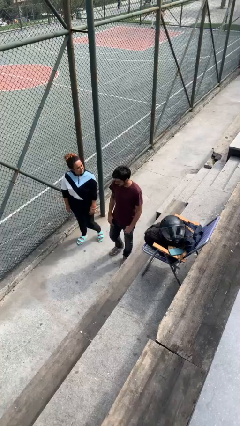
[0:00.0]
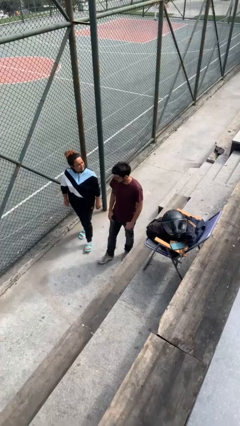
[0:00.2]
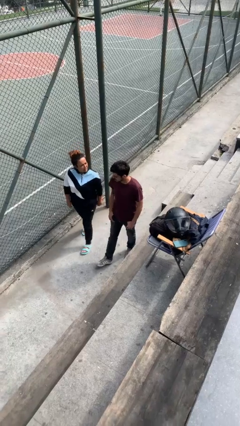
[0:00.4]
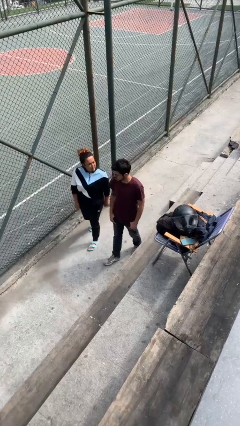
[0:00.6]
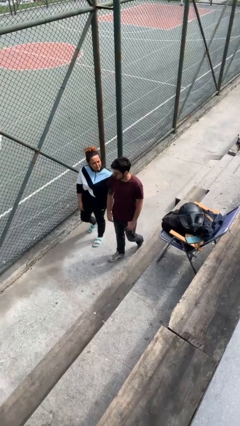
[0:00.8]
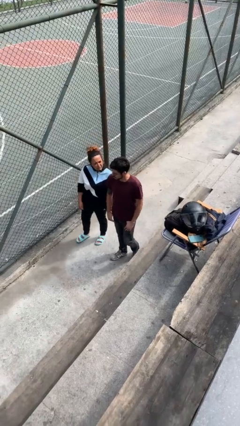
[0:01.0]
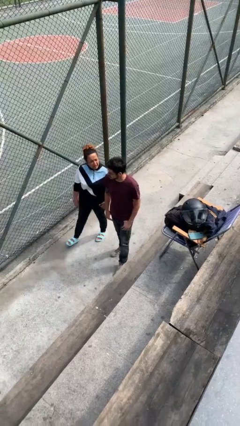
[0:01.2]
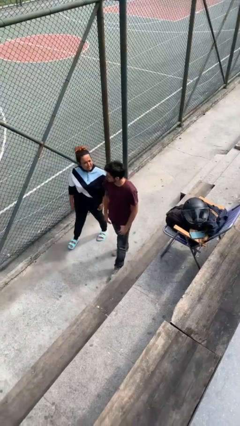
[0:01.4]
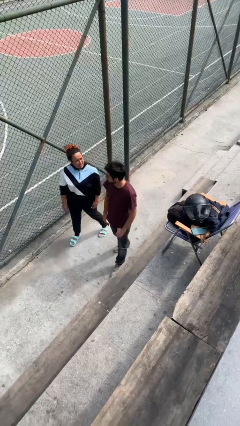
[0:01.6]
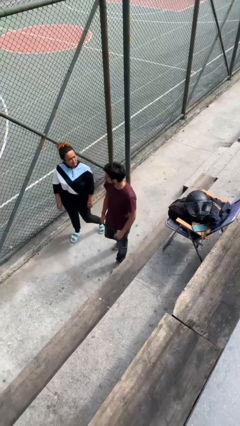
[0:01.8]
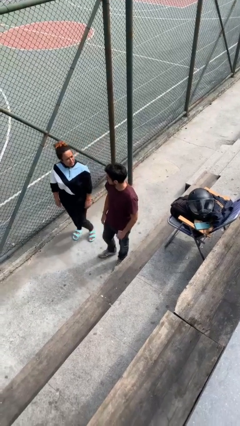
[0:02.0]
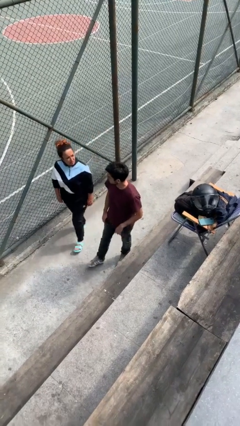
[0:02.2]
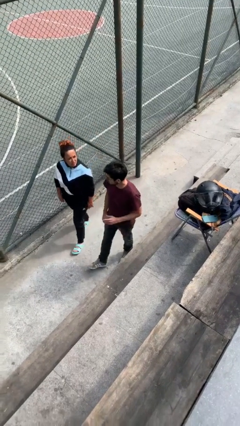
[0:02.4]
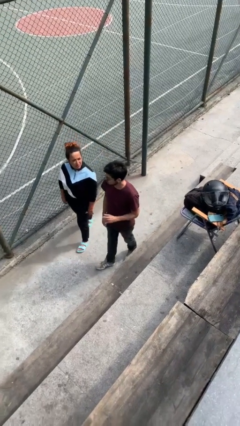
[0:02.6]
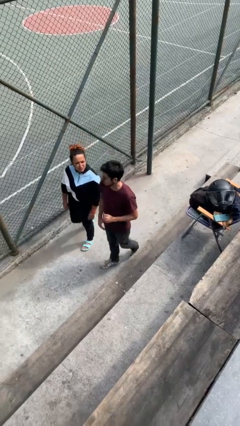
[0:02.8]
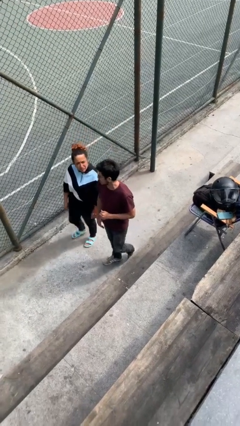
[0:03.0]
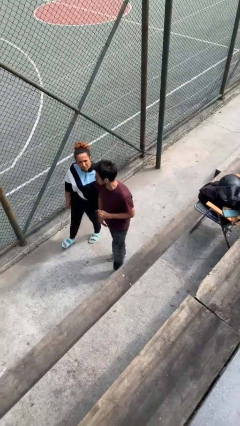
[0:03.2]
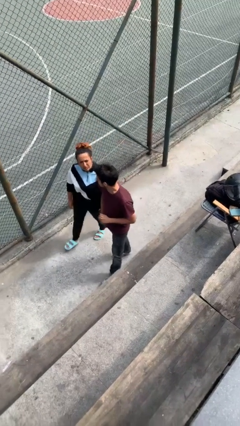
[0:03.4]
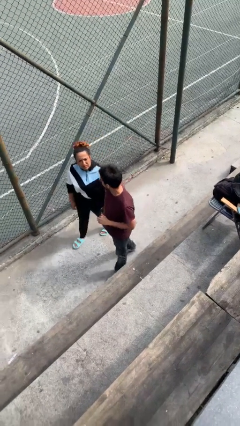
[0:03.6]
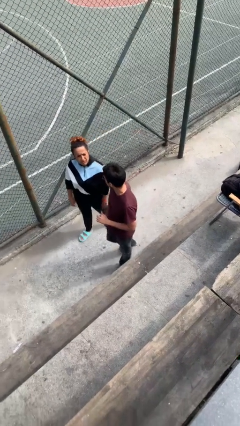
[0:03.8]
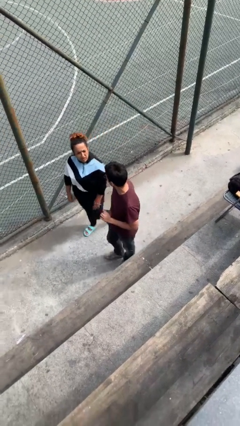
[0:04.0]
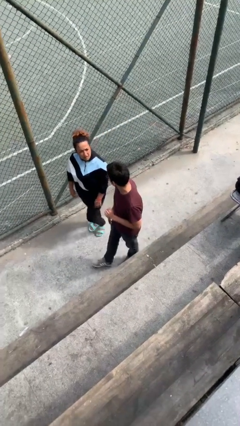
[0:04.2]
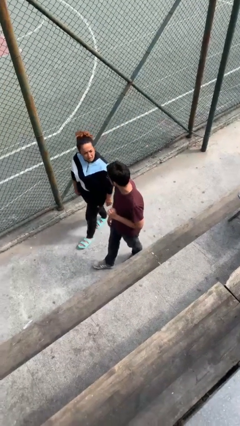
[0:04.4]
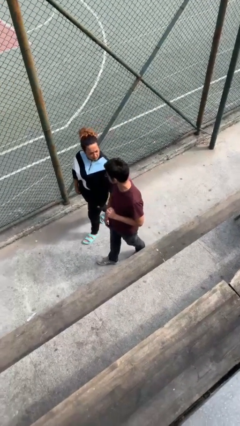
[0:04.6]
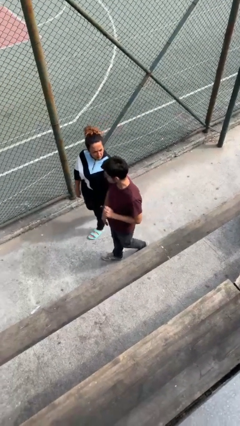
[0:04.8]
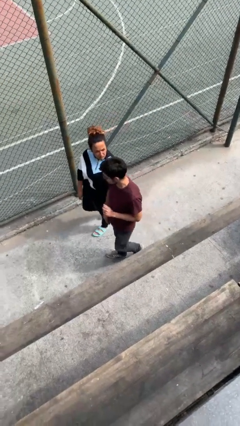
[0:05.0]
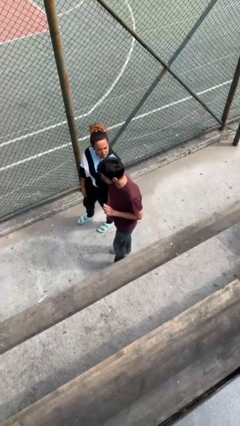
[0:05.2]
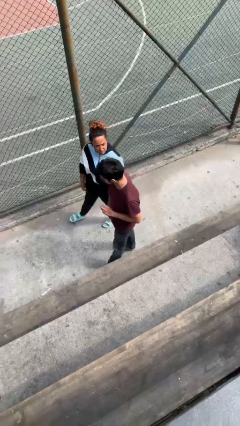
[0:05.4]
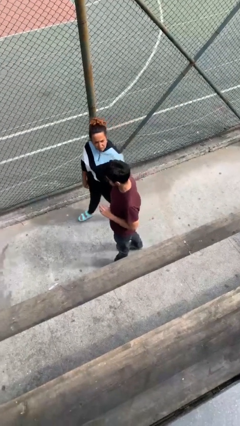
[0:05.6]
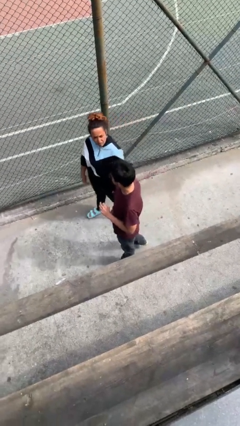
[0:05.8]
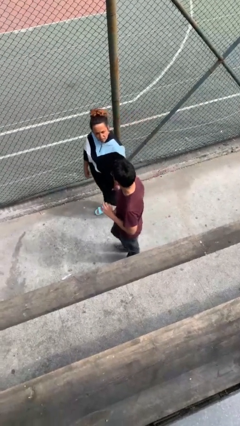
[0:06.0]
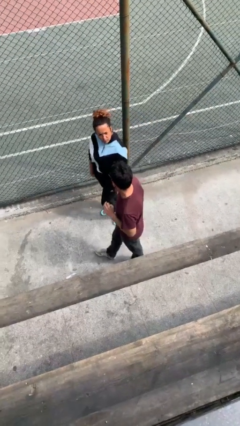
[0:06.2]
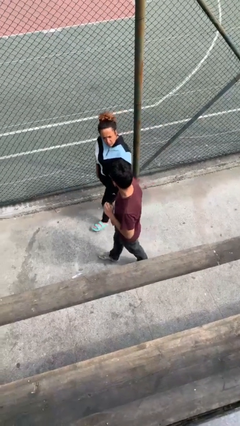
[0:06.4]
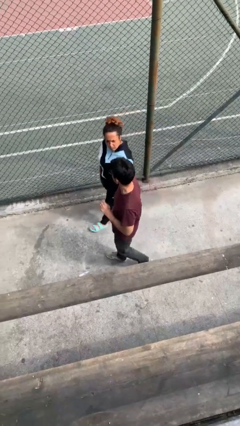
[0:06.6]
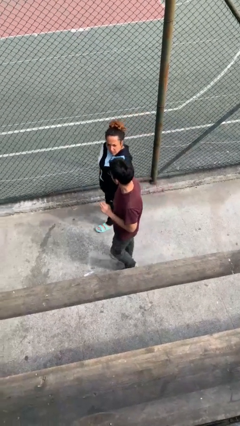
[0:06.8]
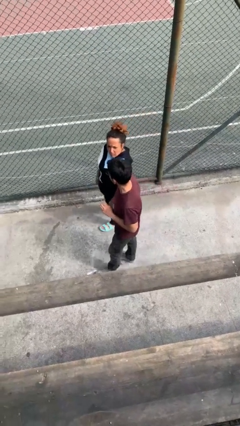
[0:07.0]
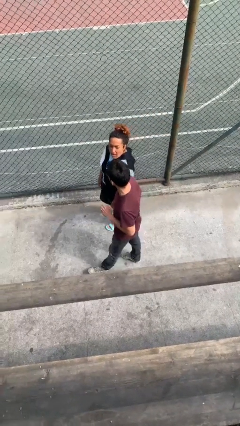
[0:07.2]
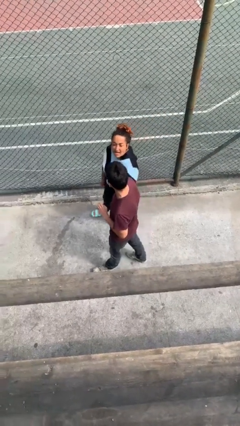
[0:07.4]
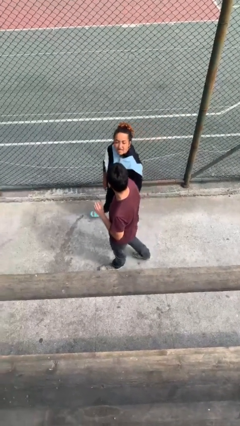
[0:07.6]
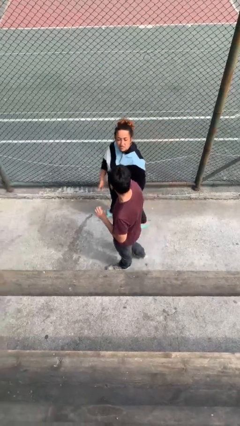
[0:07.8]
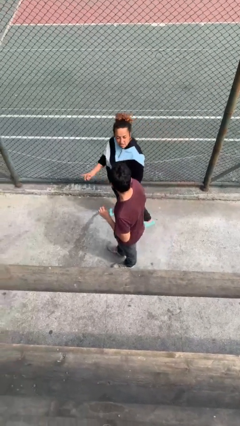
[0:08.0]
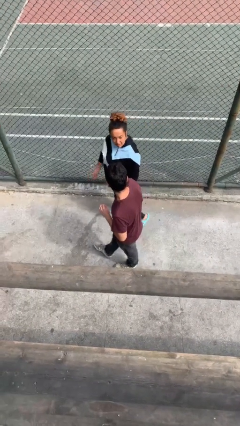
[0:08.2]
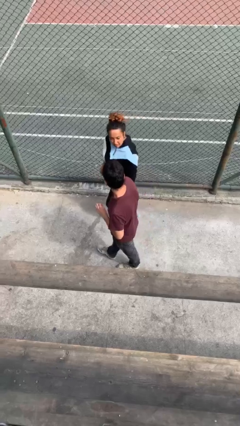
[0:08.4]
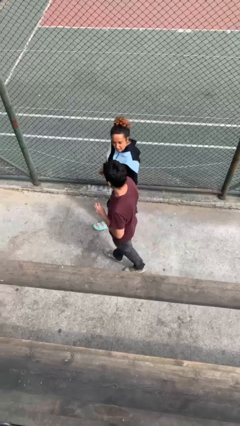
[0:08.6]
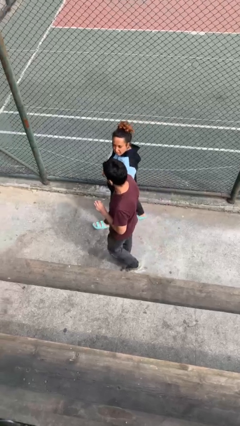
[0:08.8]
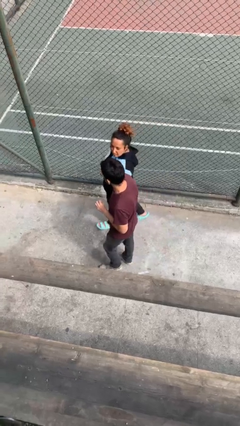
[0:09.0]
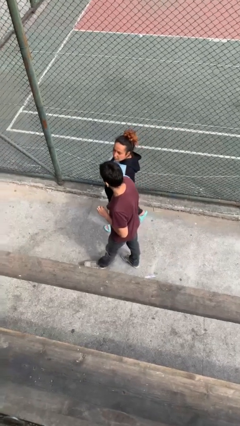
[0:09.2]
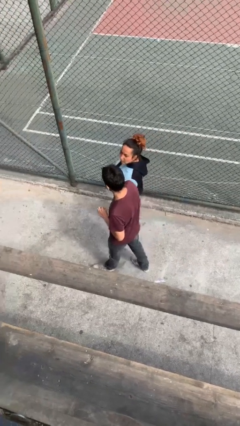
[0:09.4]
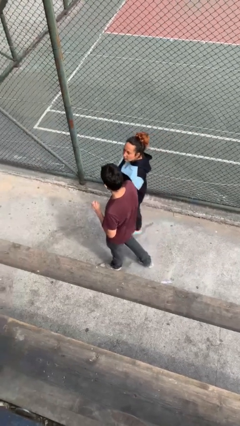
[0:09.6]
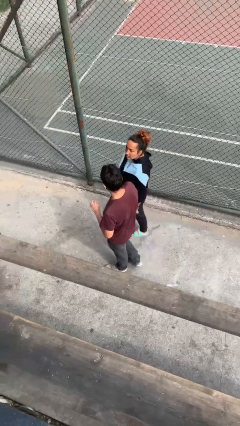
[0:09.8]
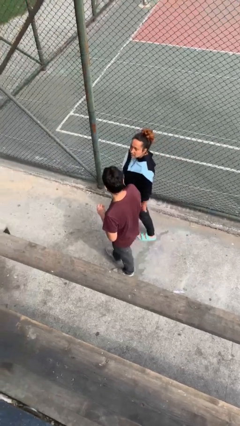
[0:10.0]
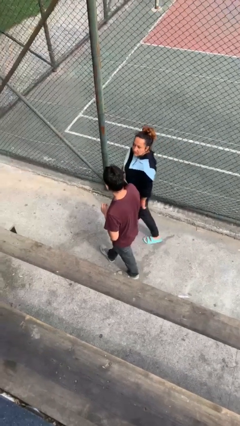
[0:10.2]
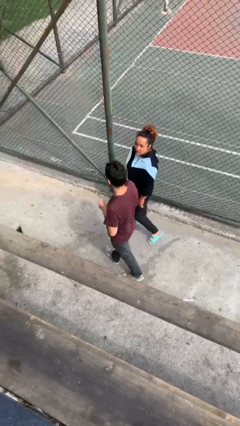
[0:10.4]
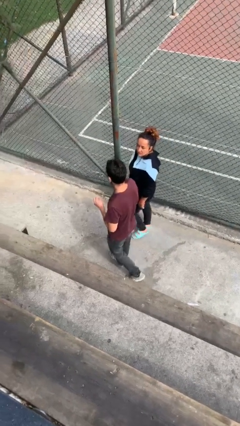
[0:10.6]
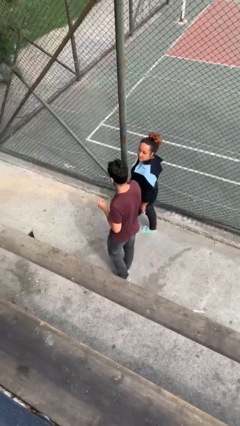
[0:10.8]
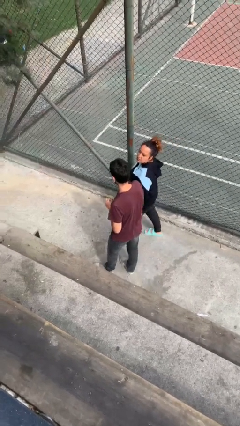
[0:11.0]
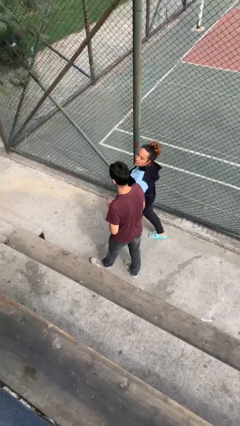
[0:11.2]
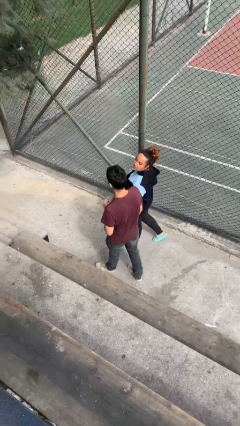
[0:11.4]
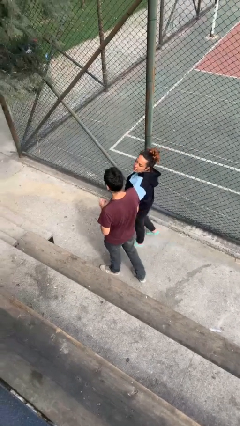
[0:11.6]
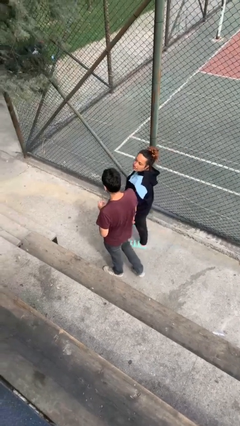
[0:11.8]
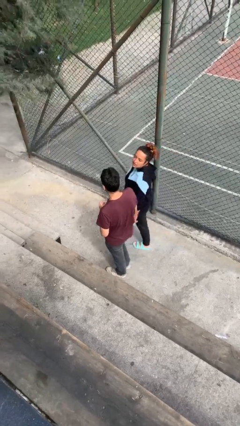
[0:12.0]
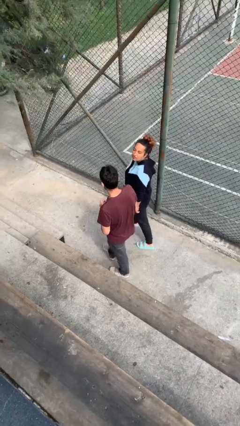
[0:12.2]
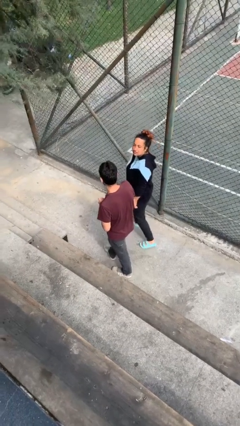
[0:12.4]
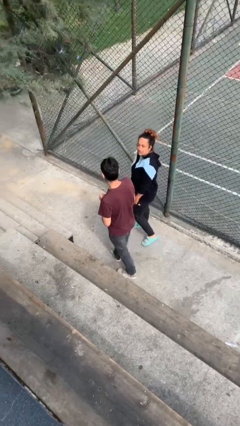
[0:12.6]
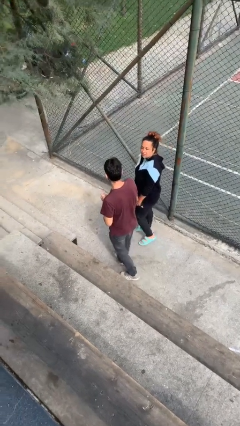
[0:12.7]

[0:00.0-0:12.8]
person talks to person

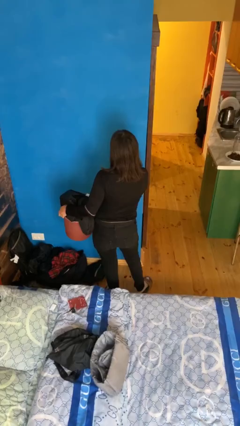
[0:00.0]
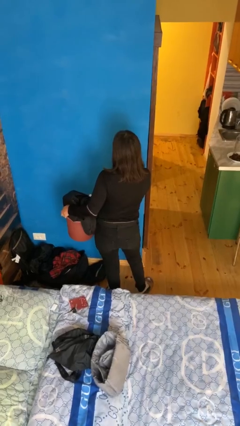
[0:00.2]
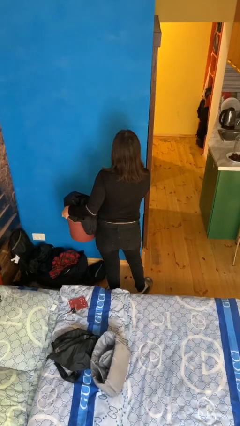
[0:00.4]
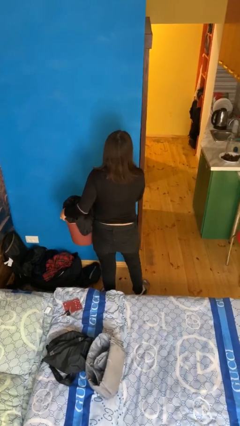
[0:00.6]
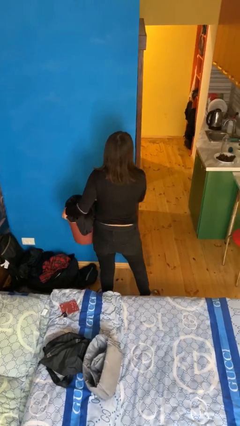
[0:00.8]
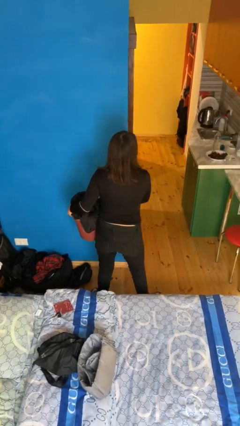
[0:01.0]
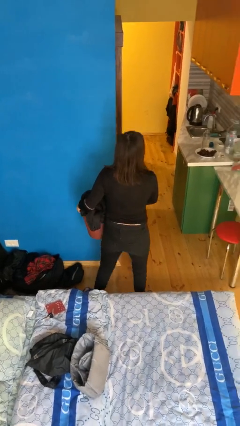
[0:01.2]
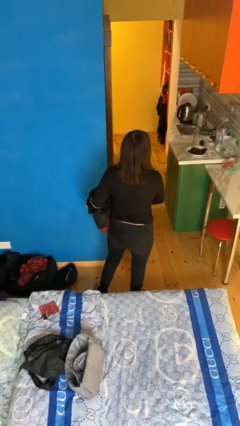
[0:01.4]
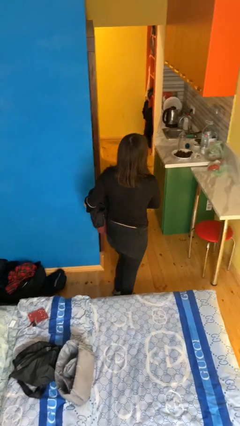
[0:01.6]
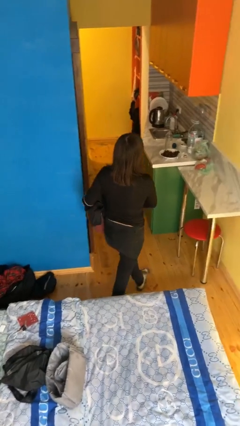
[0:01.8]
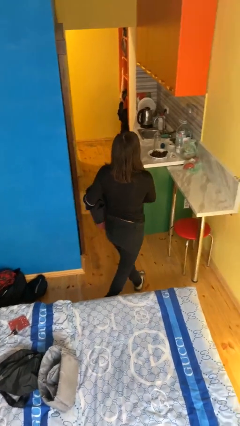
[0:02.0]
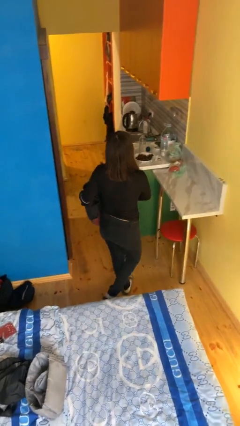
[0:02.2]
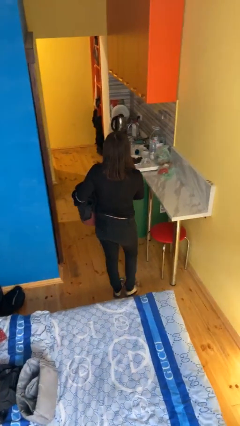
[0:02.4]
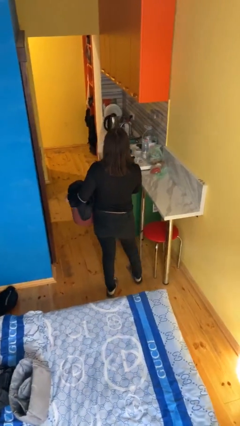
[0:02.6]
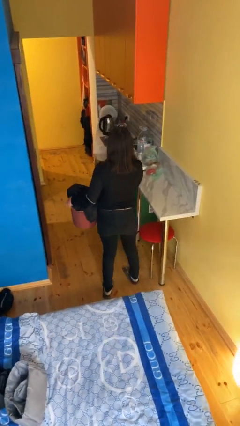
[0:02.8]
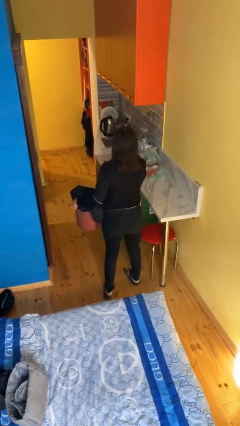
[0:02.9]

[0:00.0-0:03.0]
person carries laundry basket

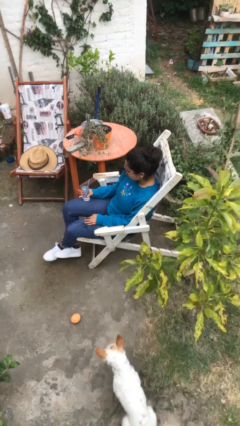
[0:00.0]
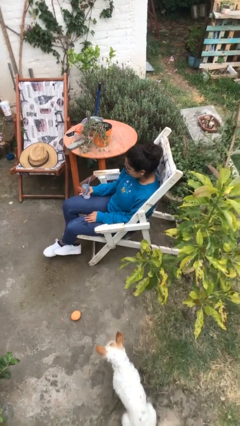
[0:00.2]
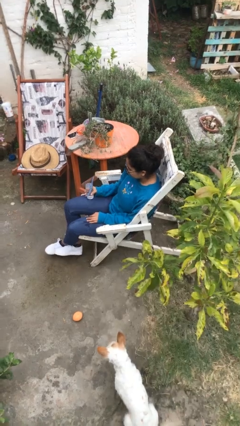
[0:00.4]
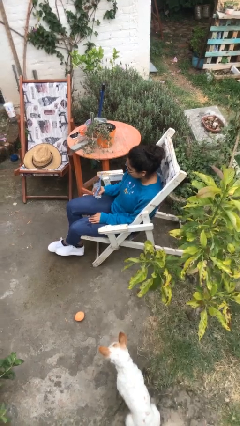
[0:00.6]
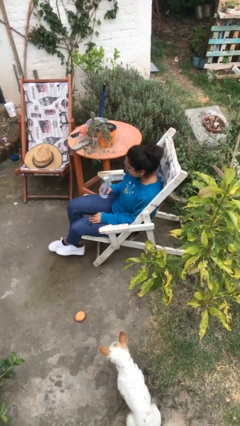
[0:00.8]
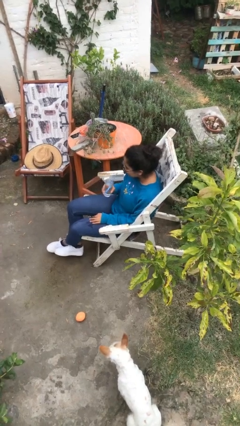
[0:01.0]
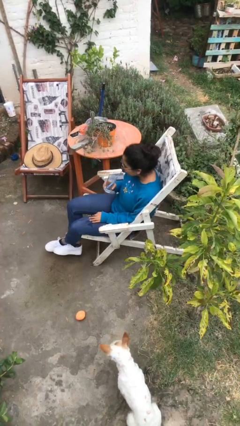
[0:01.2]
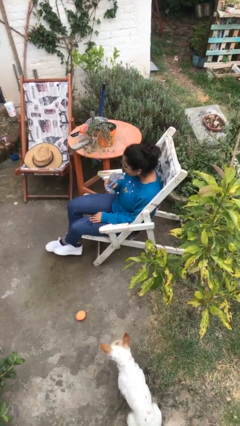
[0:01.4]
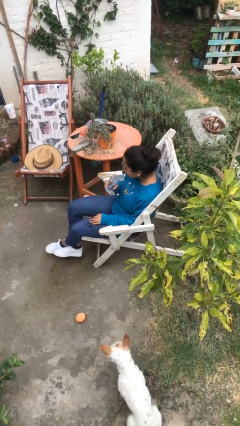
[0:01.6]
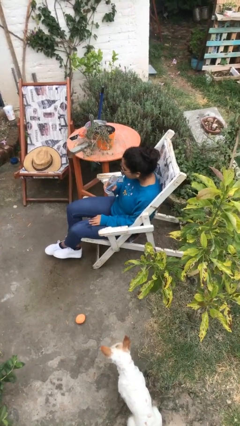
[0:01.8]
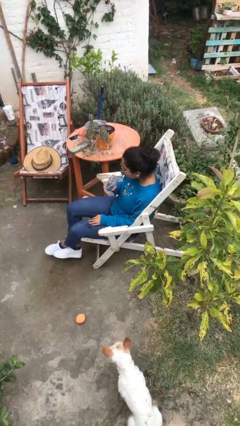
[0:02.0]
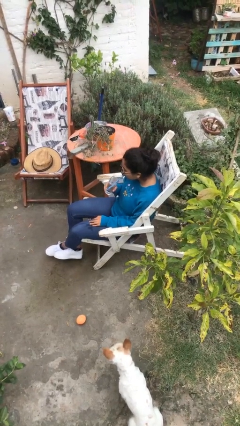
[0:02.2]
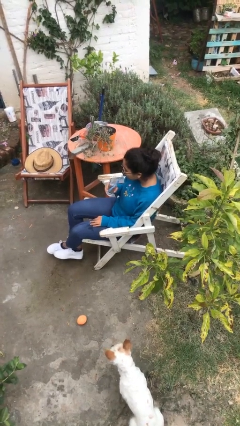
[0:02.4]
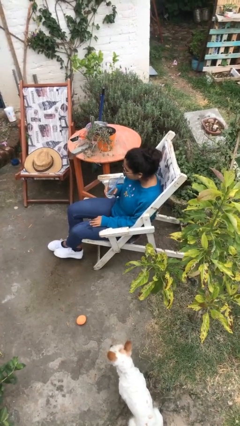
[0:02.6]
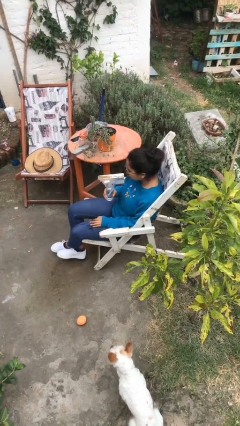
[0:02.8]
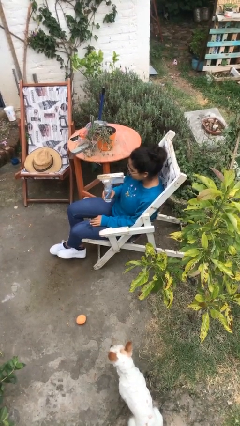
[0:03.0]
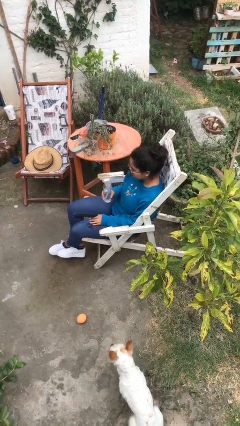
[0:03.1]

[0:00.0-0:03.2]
person drinks from straw
